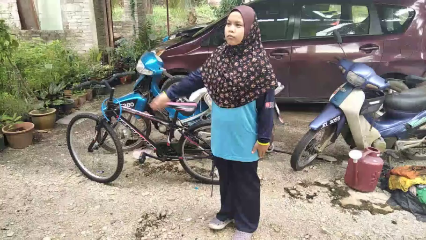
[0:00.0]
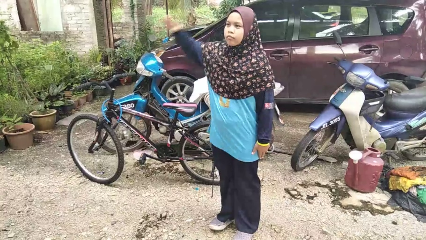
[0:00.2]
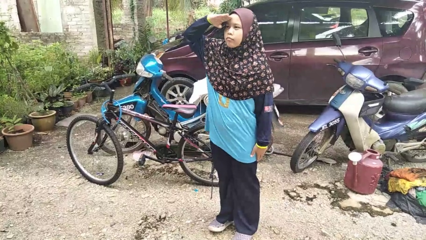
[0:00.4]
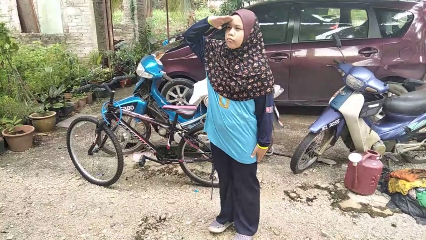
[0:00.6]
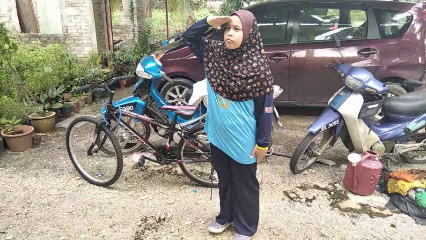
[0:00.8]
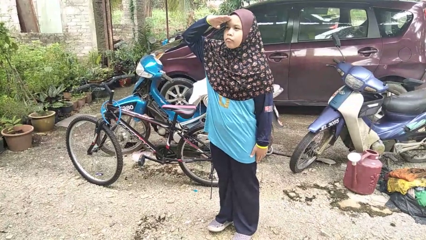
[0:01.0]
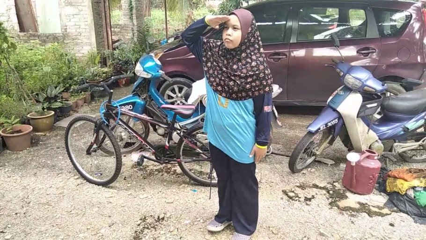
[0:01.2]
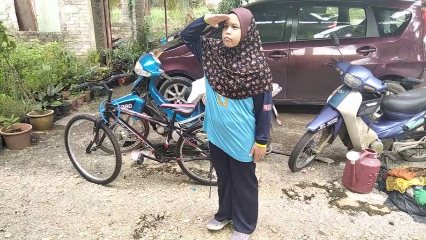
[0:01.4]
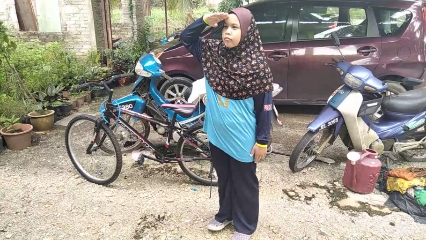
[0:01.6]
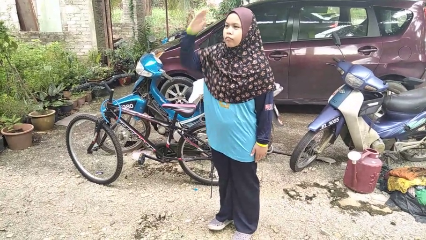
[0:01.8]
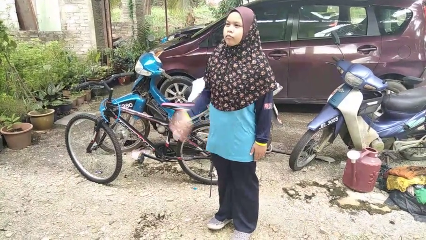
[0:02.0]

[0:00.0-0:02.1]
person salutes

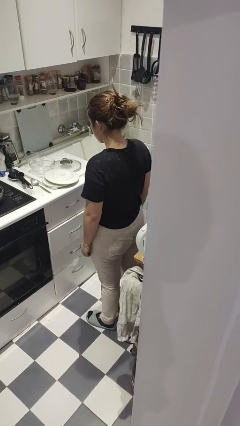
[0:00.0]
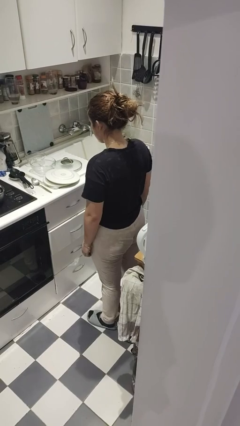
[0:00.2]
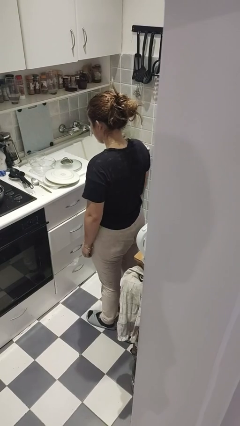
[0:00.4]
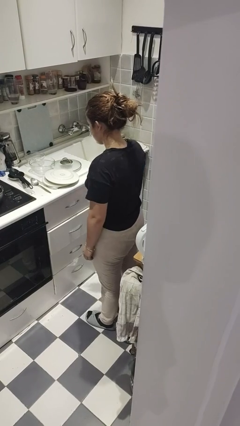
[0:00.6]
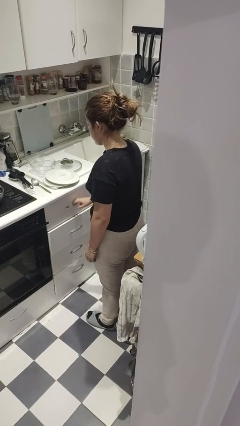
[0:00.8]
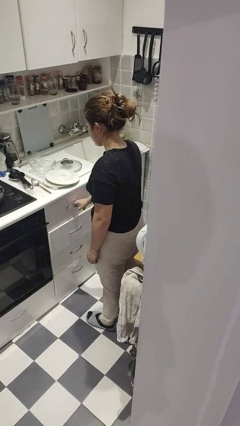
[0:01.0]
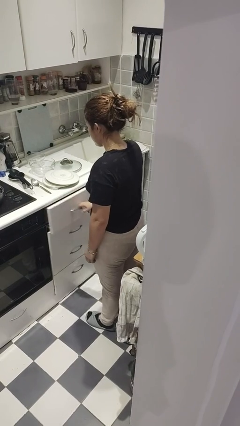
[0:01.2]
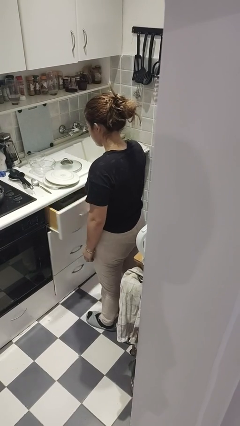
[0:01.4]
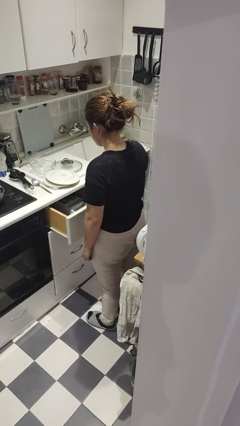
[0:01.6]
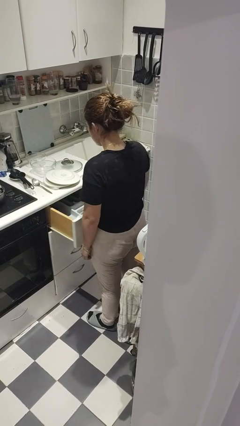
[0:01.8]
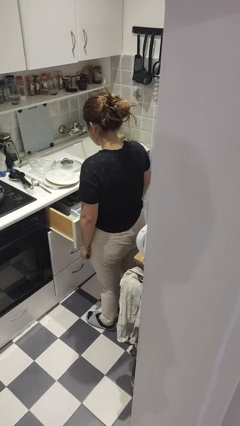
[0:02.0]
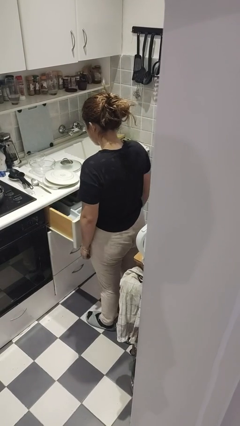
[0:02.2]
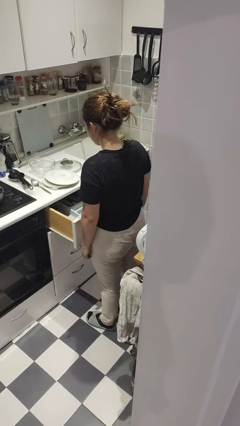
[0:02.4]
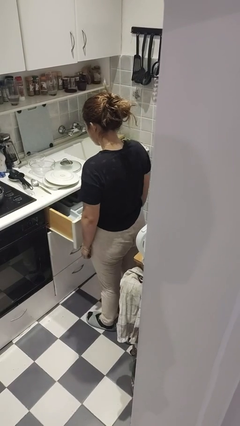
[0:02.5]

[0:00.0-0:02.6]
person opens kitchen drawer

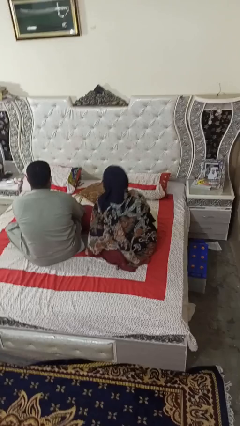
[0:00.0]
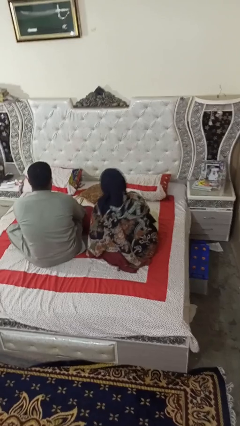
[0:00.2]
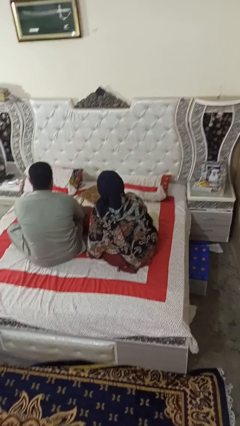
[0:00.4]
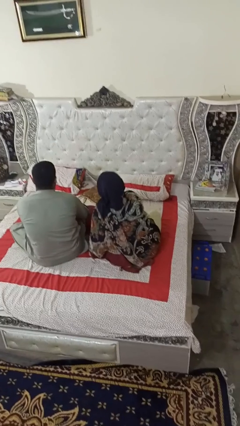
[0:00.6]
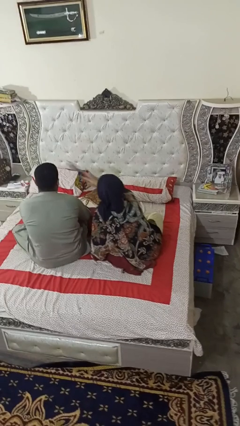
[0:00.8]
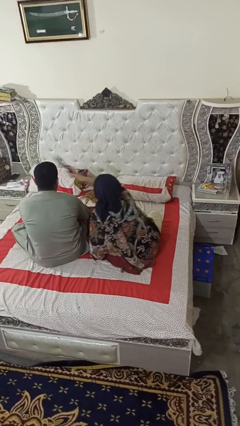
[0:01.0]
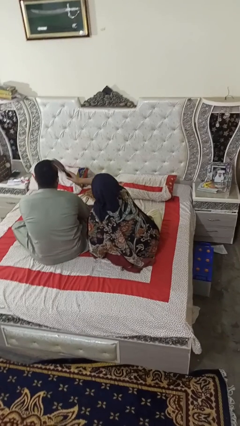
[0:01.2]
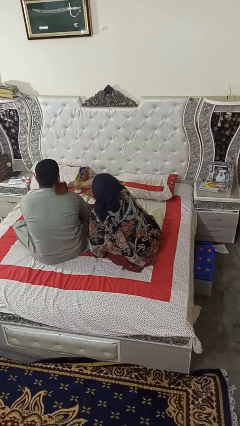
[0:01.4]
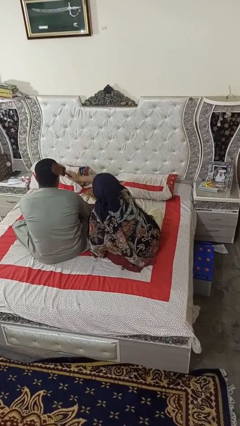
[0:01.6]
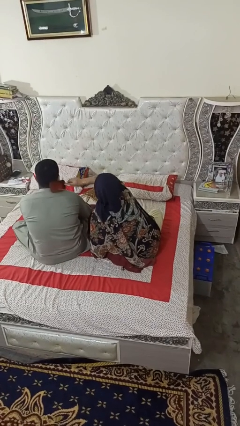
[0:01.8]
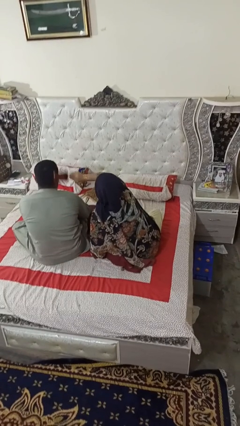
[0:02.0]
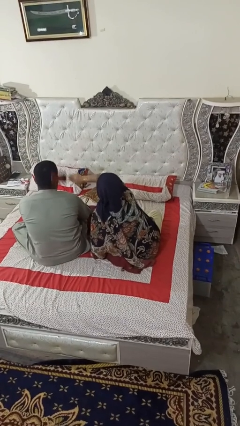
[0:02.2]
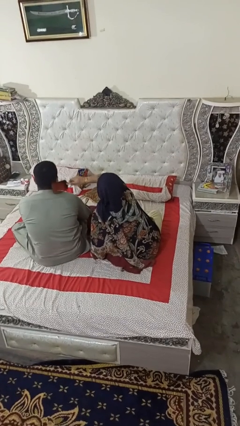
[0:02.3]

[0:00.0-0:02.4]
person brushes hair of person

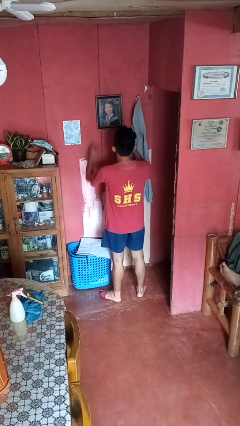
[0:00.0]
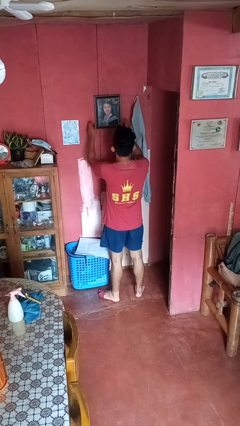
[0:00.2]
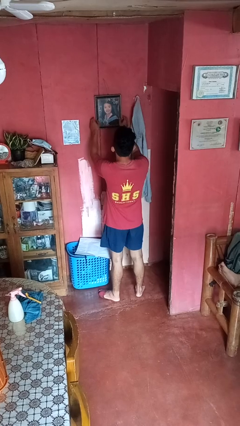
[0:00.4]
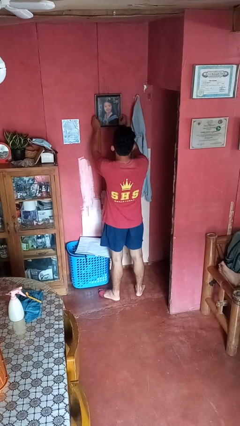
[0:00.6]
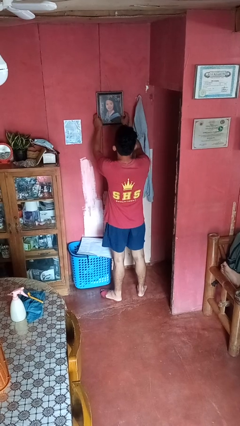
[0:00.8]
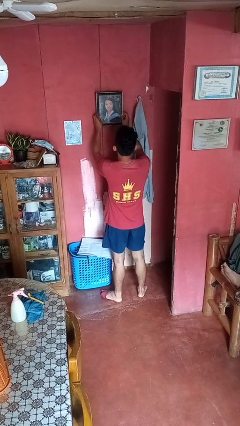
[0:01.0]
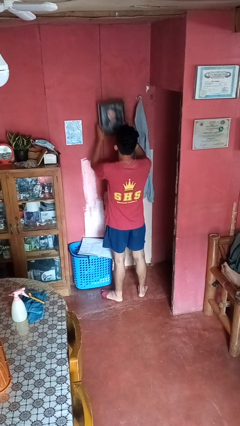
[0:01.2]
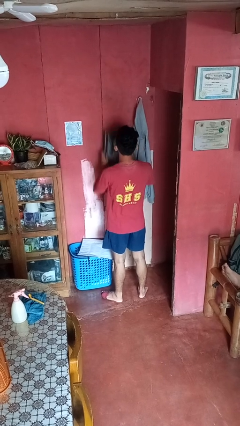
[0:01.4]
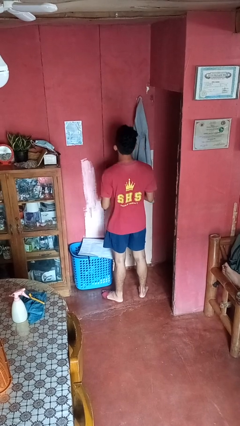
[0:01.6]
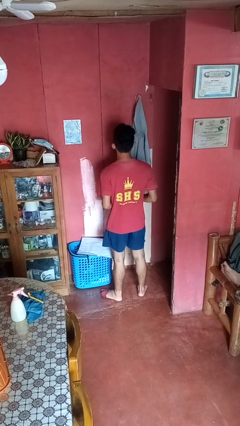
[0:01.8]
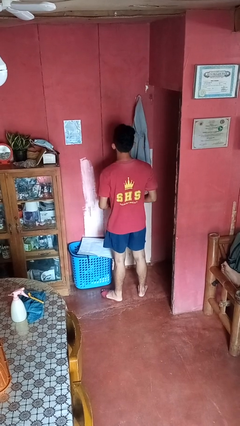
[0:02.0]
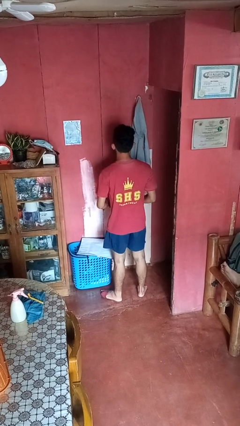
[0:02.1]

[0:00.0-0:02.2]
person takes down picture frame

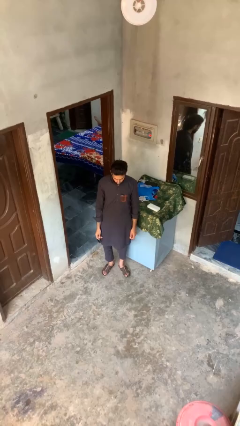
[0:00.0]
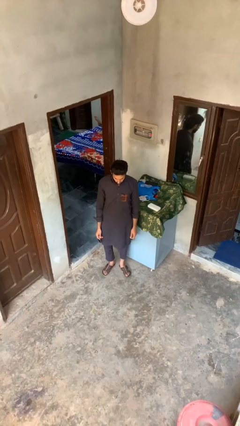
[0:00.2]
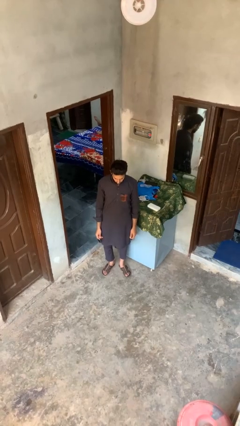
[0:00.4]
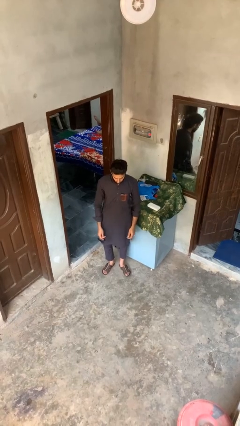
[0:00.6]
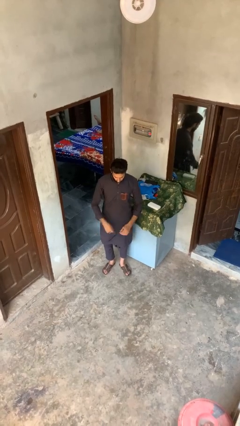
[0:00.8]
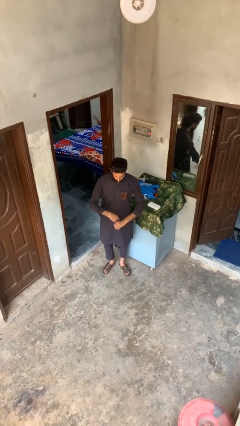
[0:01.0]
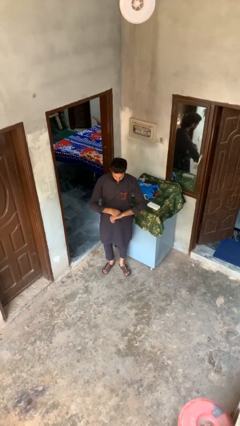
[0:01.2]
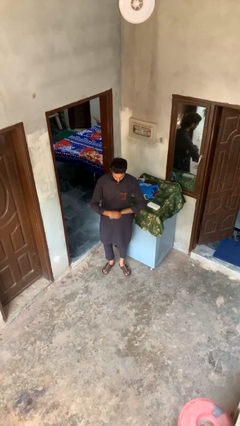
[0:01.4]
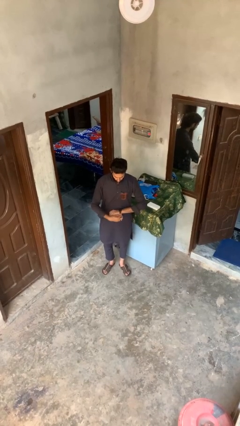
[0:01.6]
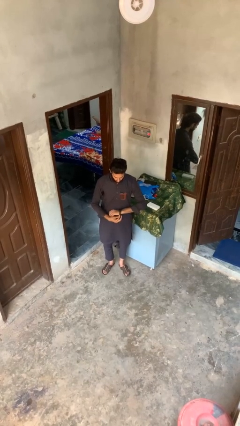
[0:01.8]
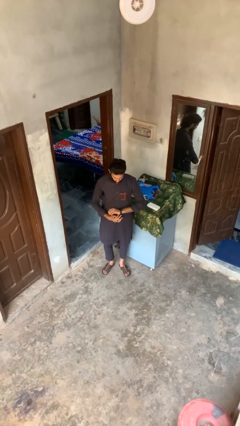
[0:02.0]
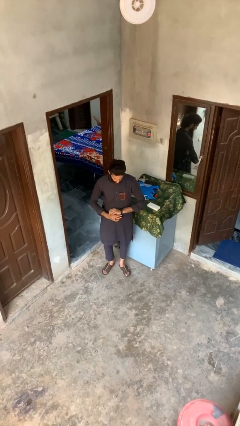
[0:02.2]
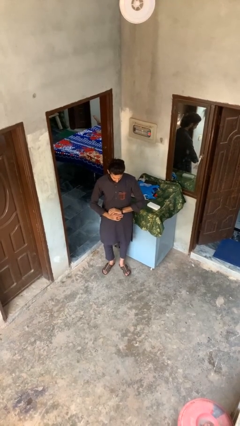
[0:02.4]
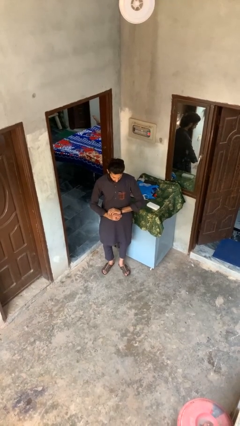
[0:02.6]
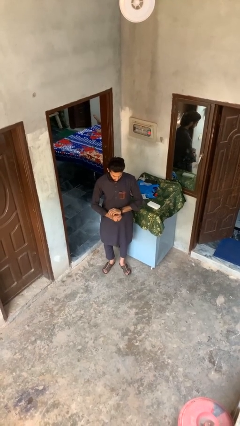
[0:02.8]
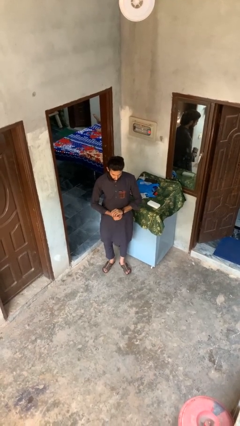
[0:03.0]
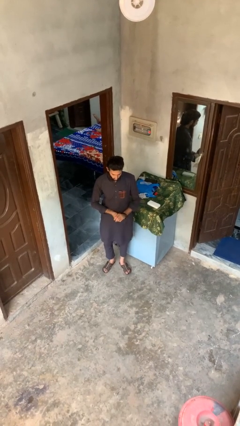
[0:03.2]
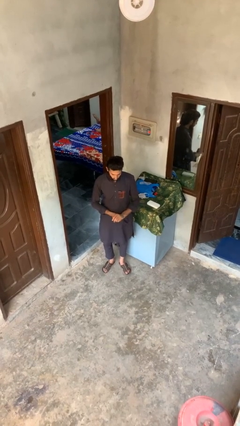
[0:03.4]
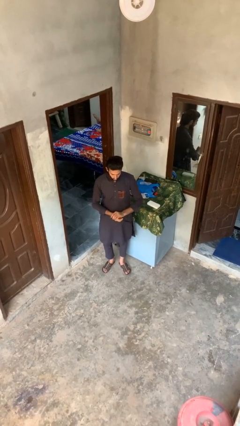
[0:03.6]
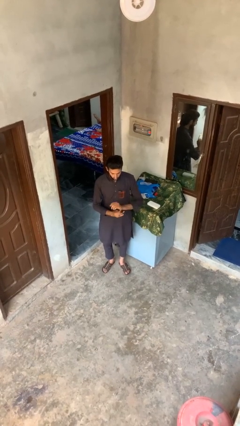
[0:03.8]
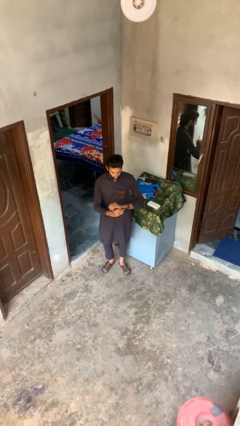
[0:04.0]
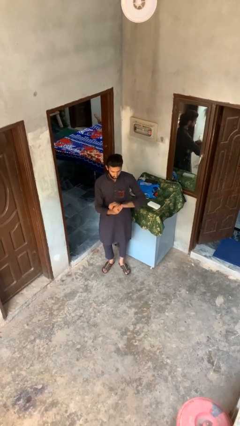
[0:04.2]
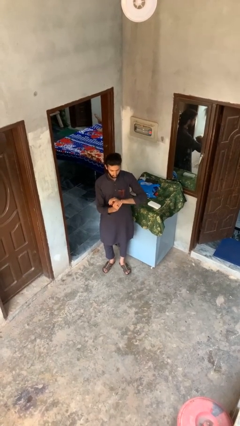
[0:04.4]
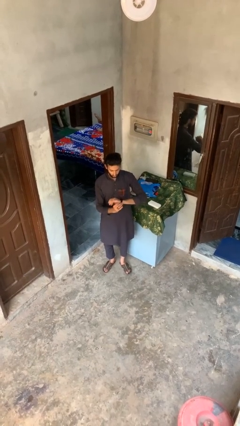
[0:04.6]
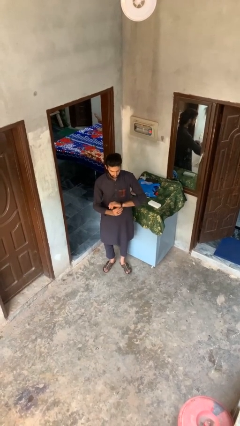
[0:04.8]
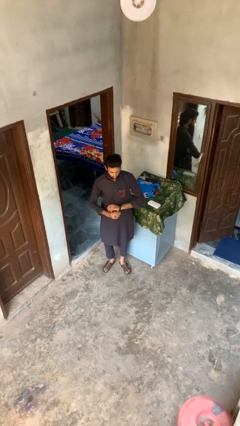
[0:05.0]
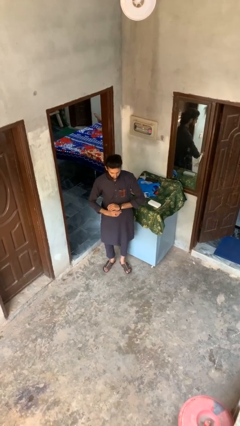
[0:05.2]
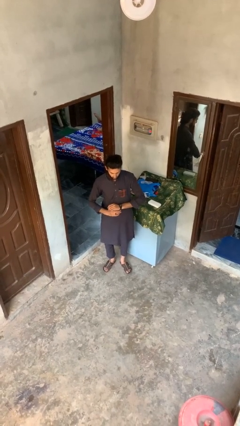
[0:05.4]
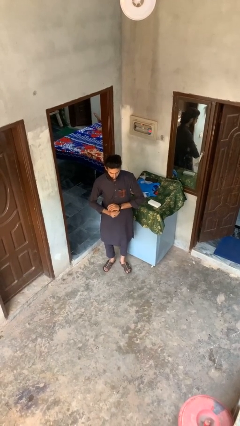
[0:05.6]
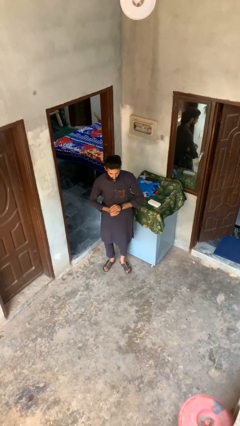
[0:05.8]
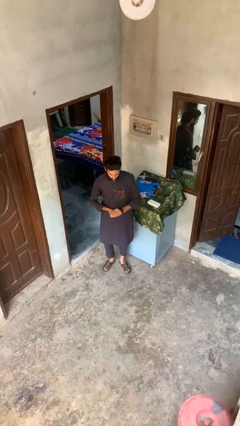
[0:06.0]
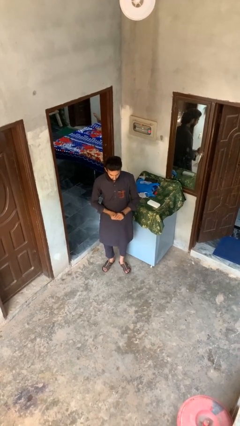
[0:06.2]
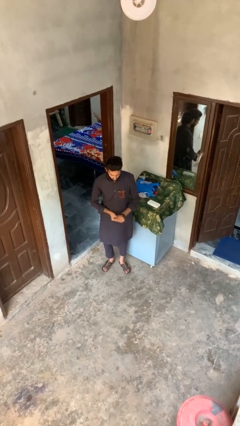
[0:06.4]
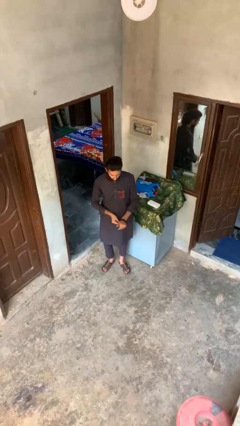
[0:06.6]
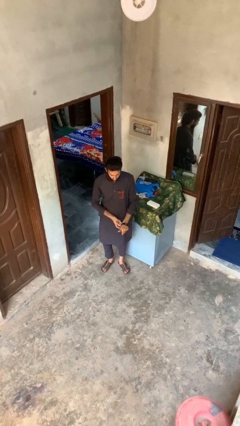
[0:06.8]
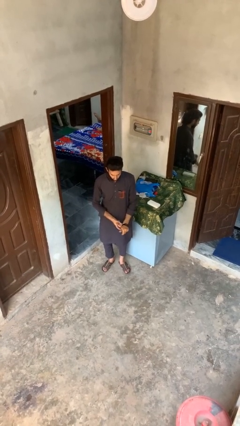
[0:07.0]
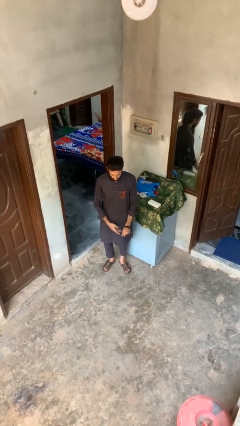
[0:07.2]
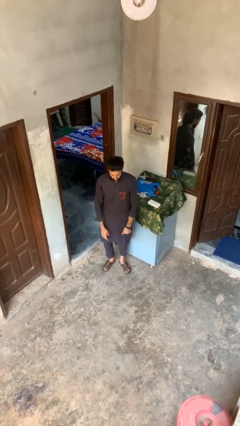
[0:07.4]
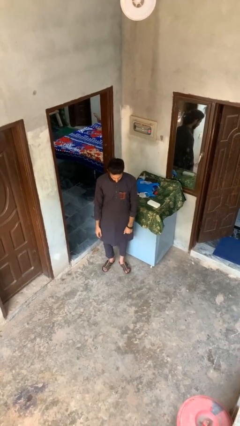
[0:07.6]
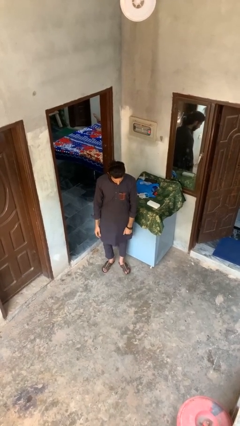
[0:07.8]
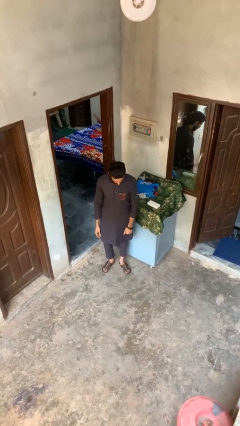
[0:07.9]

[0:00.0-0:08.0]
person puts on wristwatch

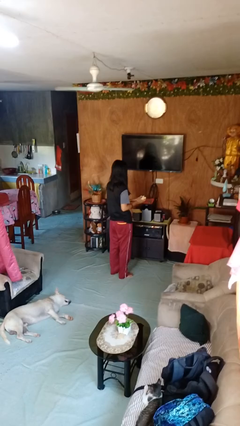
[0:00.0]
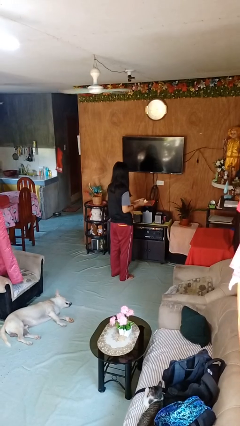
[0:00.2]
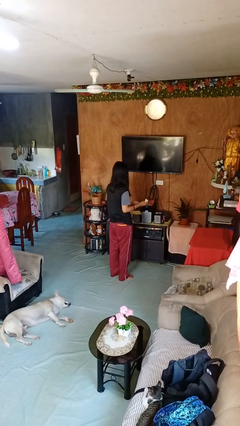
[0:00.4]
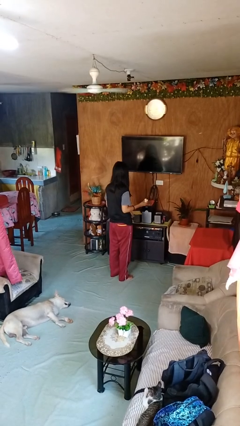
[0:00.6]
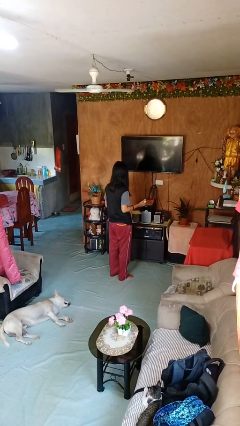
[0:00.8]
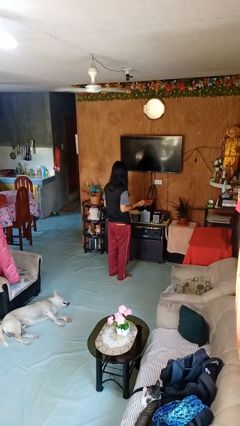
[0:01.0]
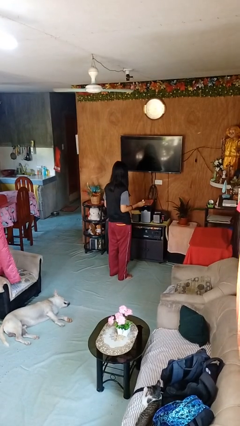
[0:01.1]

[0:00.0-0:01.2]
person crumples paper
